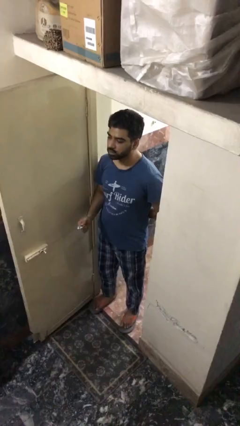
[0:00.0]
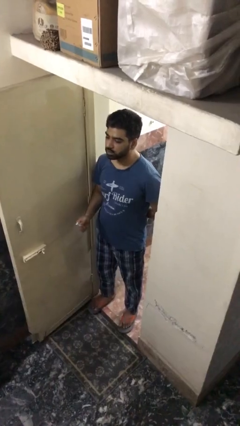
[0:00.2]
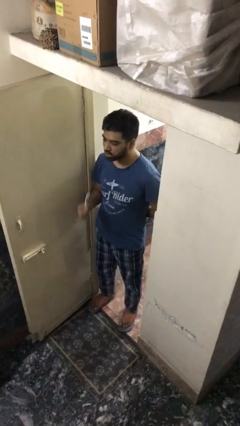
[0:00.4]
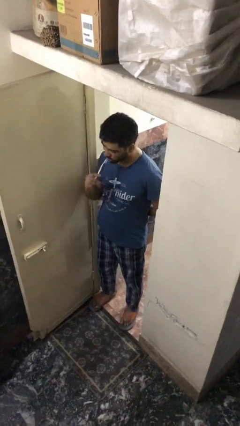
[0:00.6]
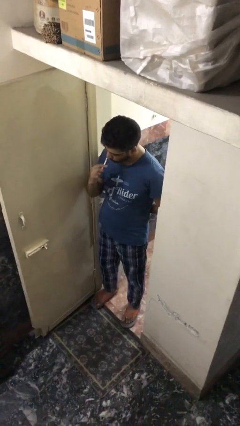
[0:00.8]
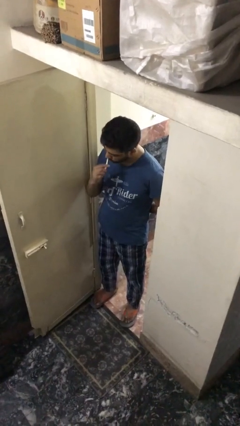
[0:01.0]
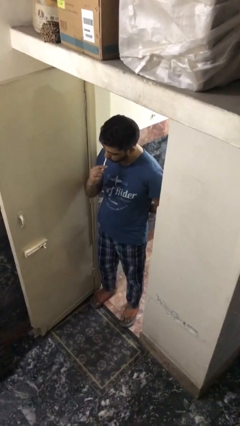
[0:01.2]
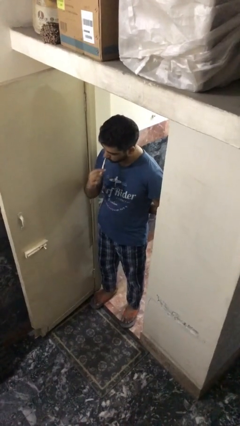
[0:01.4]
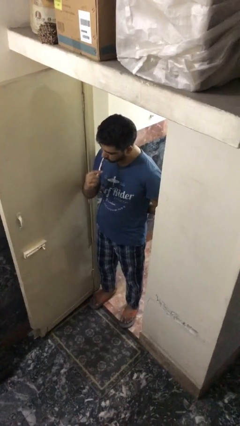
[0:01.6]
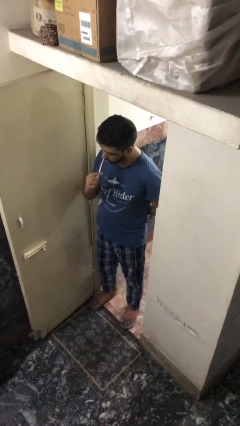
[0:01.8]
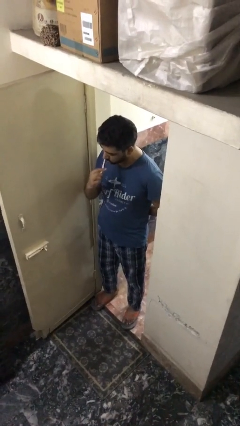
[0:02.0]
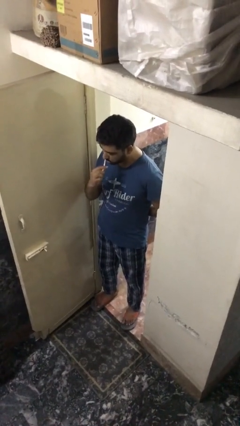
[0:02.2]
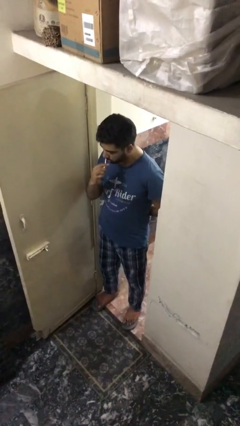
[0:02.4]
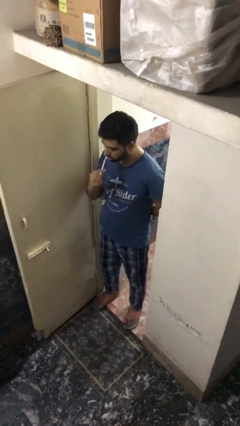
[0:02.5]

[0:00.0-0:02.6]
person brushes teeth

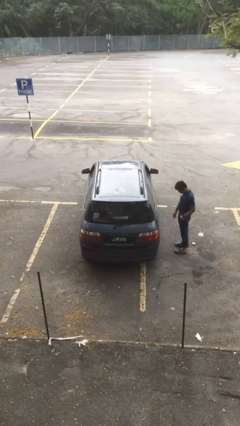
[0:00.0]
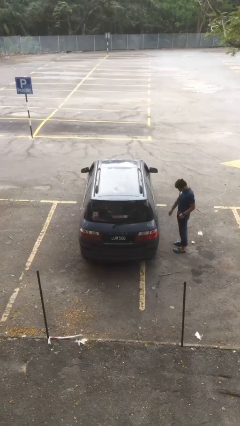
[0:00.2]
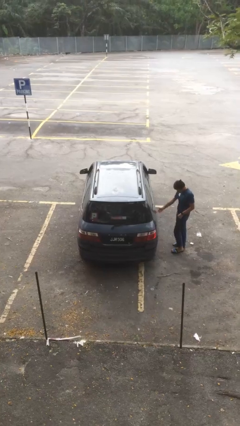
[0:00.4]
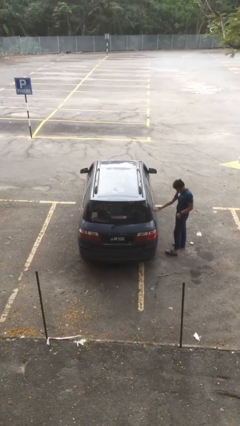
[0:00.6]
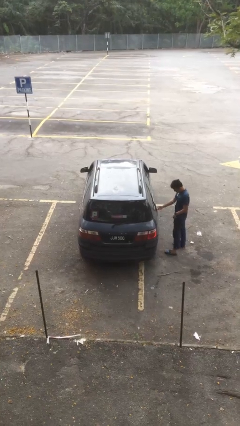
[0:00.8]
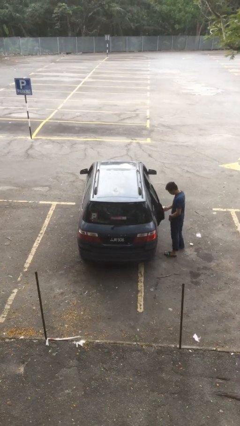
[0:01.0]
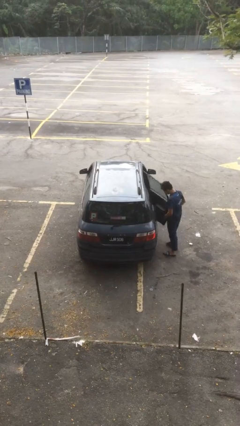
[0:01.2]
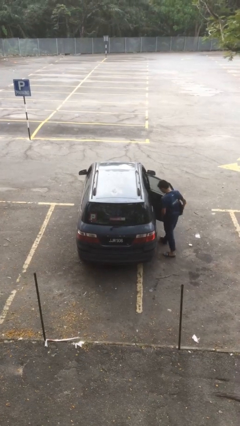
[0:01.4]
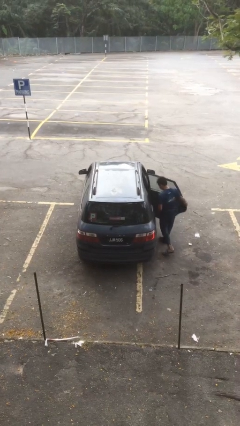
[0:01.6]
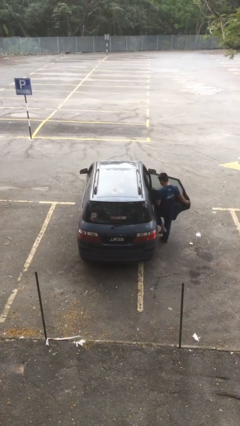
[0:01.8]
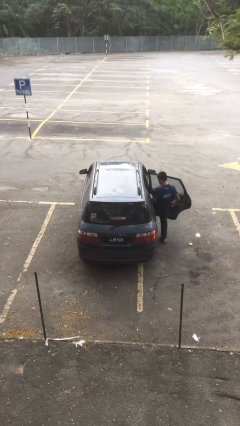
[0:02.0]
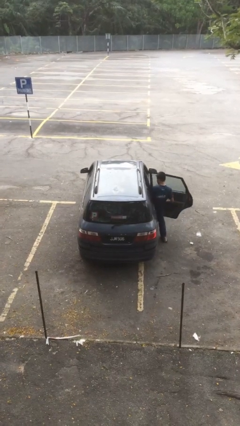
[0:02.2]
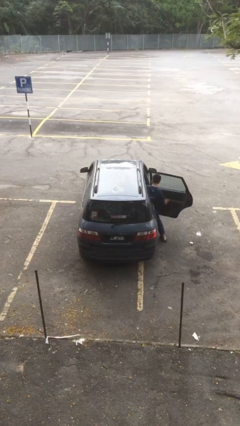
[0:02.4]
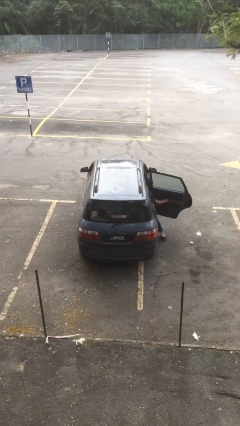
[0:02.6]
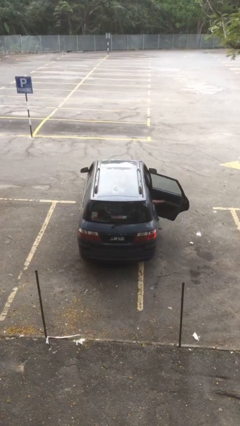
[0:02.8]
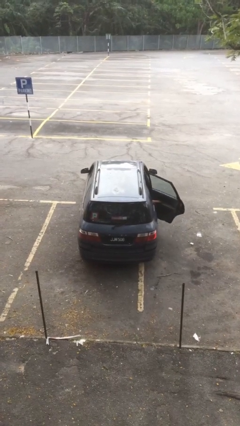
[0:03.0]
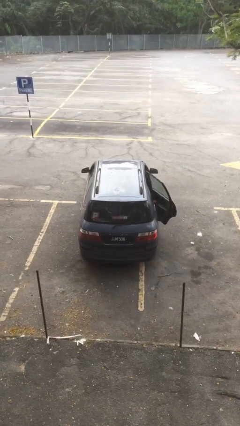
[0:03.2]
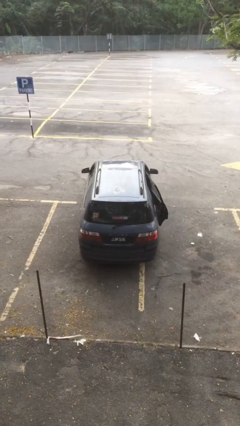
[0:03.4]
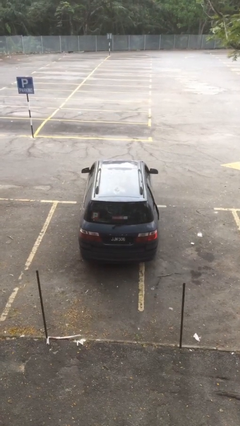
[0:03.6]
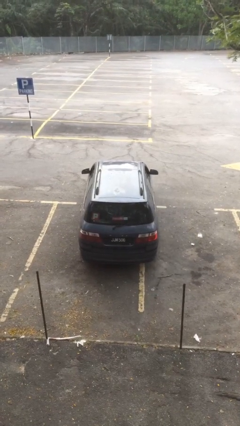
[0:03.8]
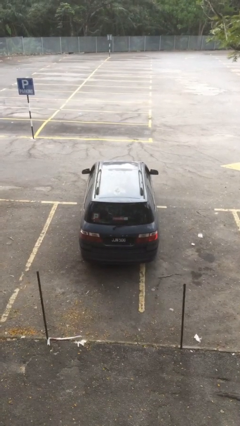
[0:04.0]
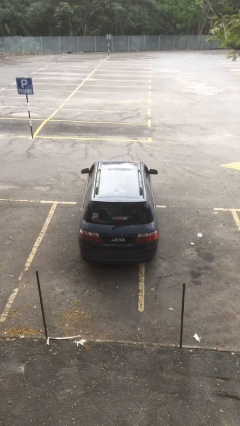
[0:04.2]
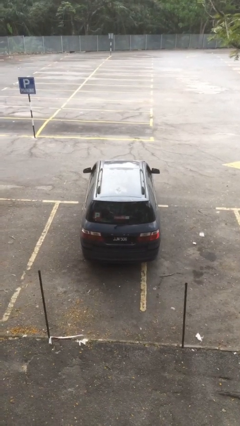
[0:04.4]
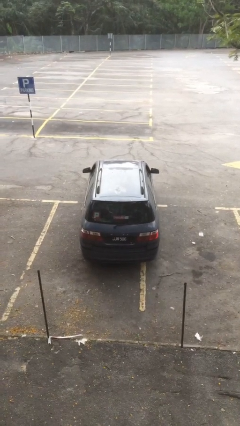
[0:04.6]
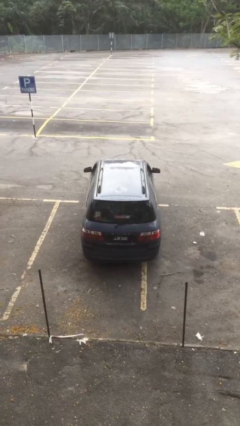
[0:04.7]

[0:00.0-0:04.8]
car picks up person

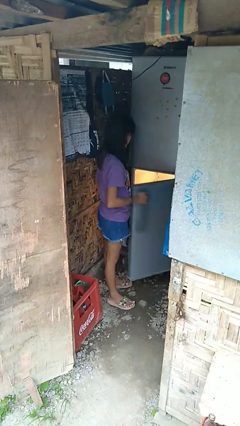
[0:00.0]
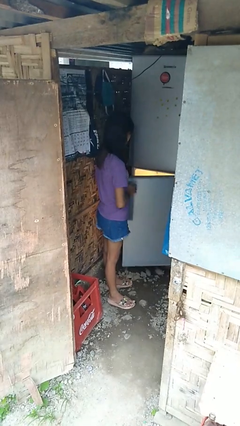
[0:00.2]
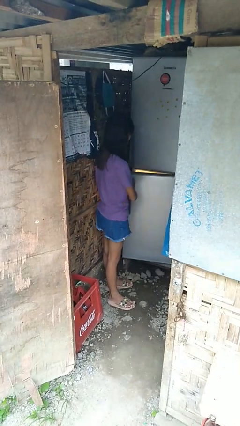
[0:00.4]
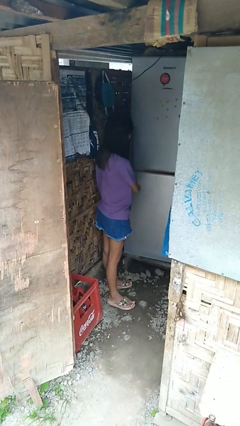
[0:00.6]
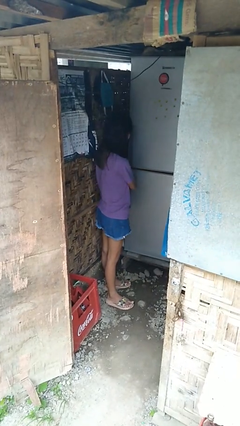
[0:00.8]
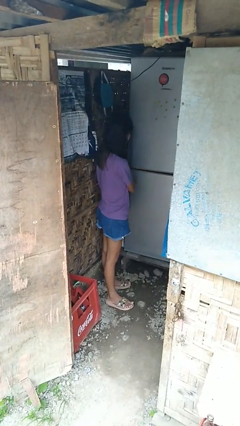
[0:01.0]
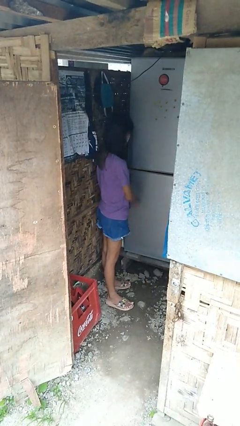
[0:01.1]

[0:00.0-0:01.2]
person closes refrigerator

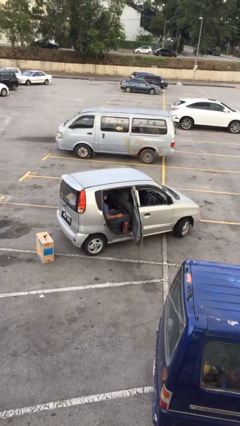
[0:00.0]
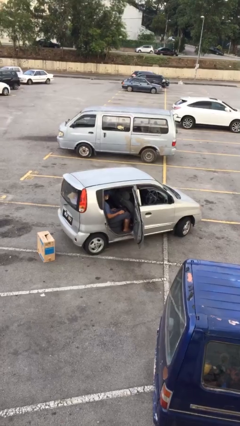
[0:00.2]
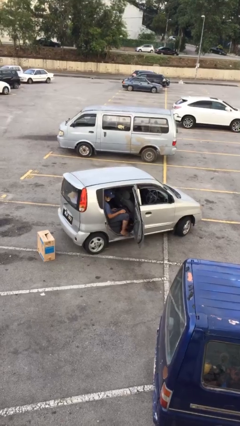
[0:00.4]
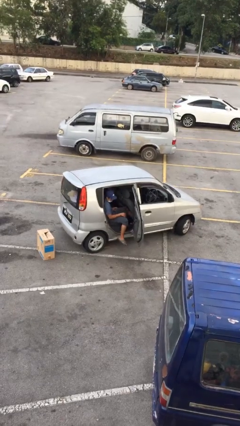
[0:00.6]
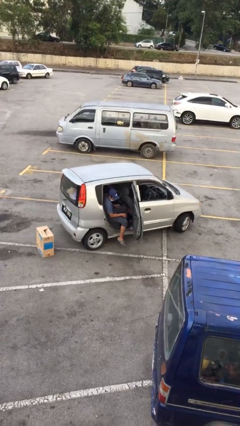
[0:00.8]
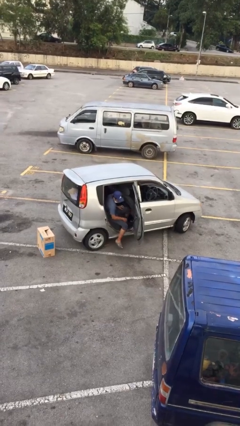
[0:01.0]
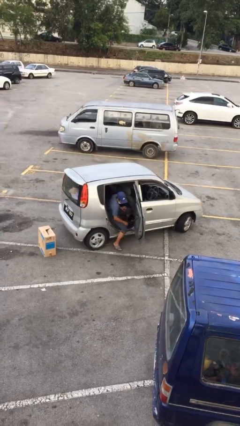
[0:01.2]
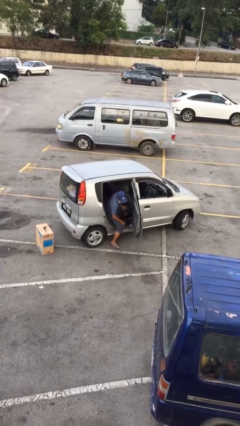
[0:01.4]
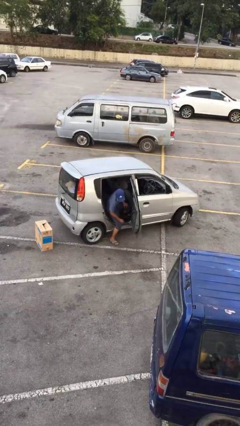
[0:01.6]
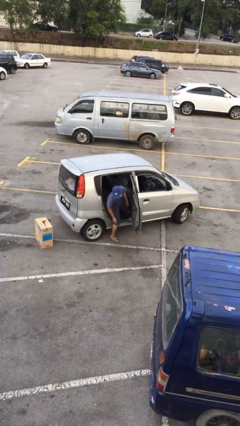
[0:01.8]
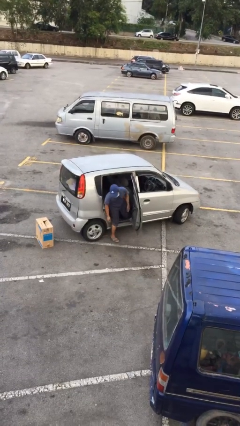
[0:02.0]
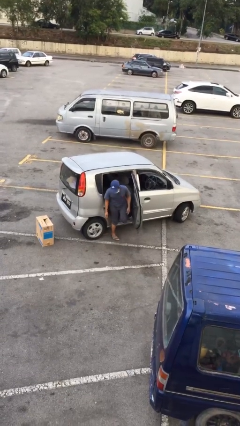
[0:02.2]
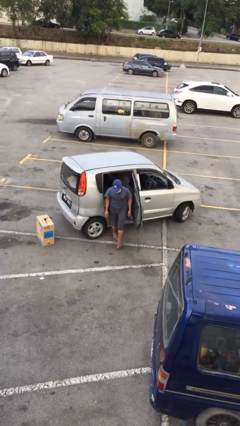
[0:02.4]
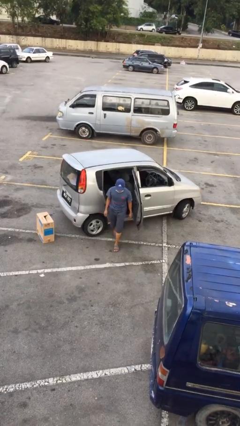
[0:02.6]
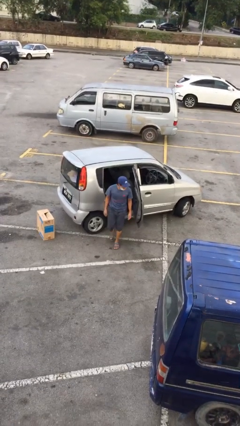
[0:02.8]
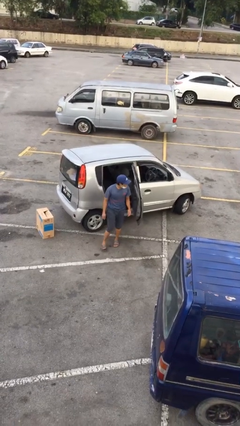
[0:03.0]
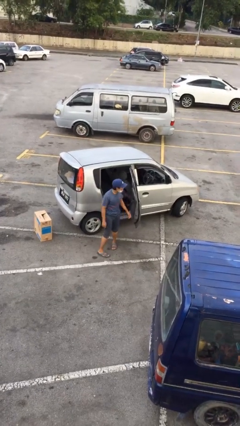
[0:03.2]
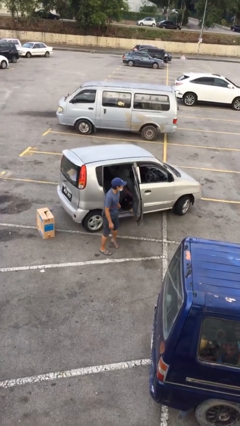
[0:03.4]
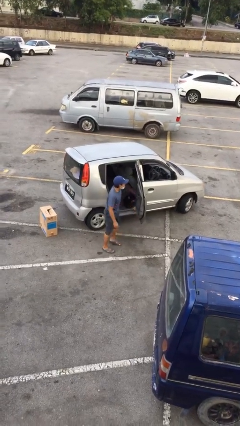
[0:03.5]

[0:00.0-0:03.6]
person exits car

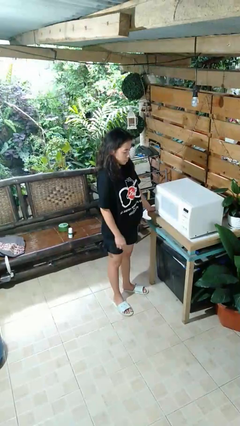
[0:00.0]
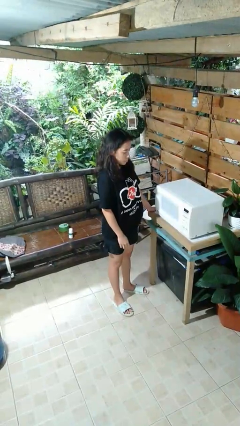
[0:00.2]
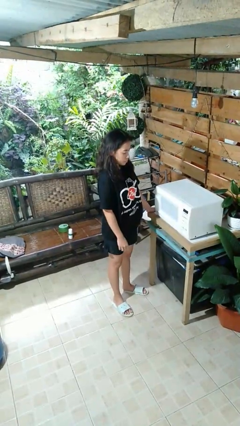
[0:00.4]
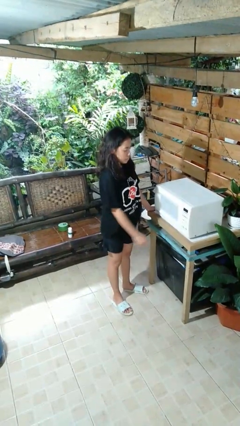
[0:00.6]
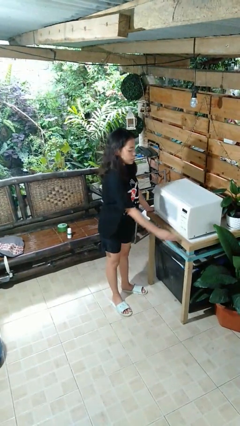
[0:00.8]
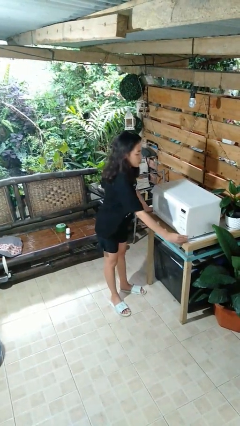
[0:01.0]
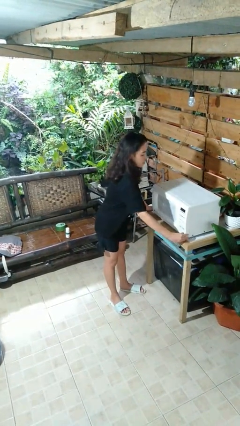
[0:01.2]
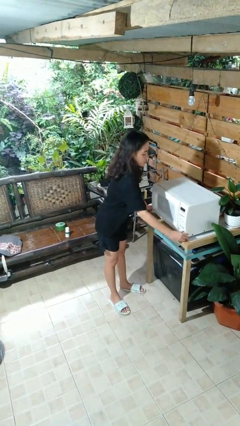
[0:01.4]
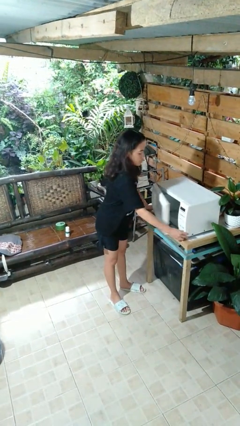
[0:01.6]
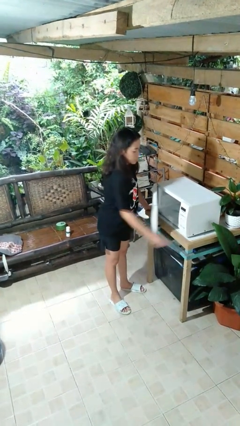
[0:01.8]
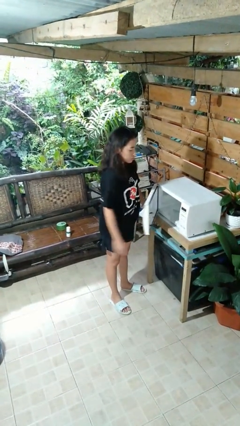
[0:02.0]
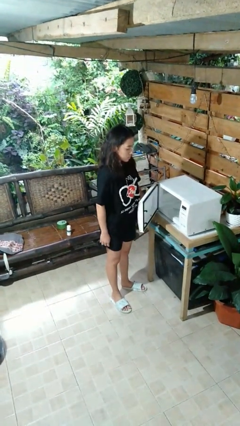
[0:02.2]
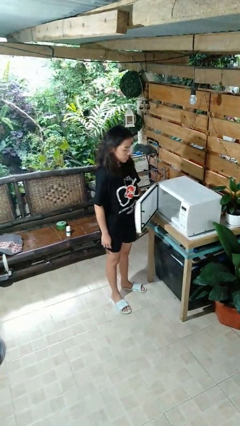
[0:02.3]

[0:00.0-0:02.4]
person opens microwave

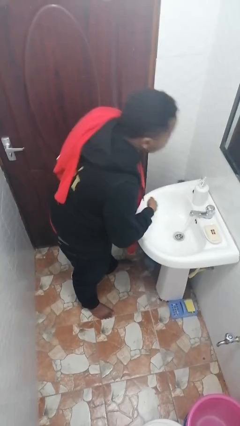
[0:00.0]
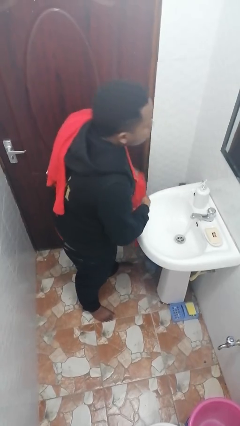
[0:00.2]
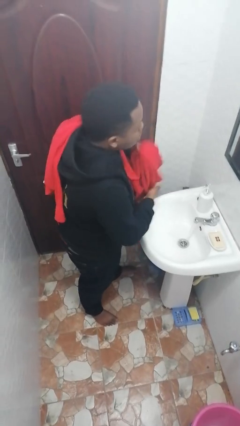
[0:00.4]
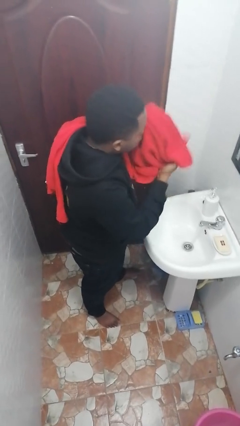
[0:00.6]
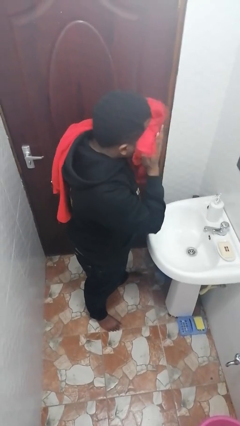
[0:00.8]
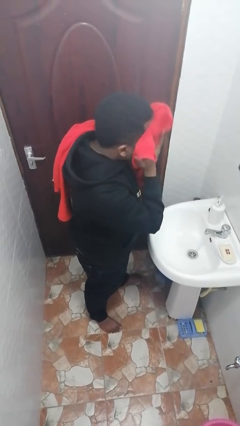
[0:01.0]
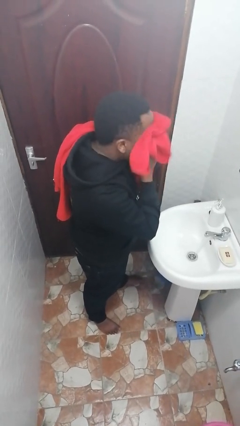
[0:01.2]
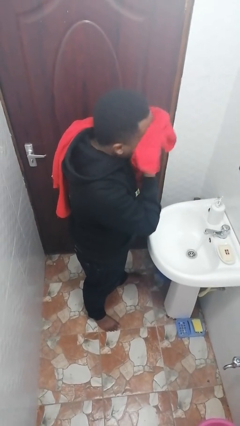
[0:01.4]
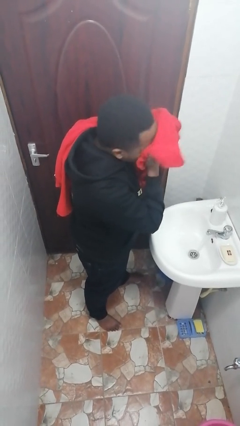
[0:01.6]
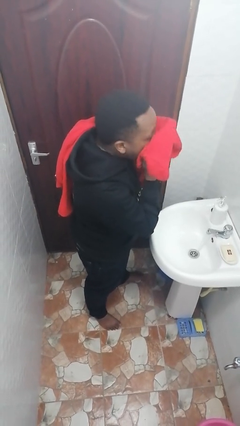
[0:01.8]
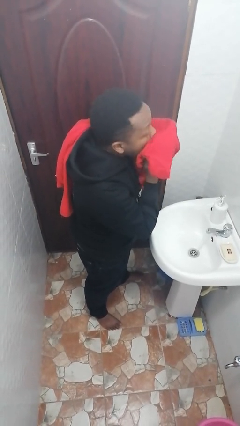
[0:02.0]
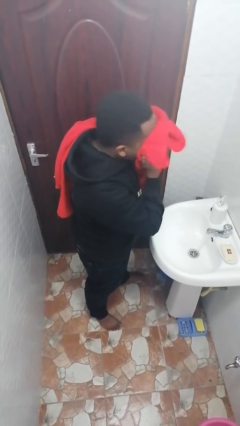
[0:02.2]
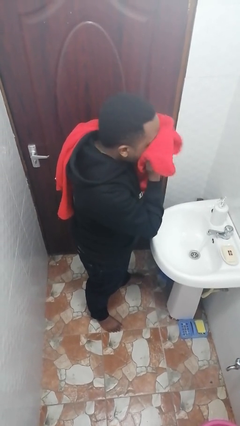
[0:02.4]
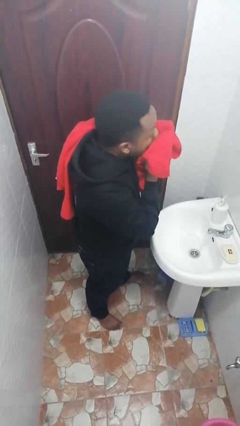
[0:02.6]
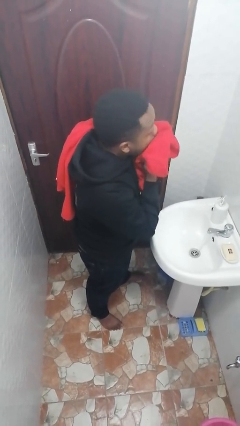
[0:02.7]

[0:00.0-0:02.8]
person dries face with towel

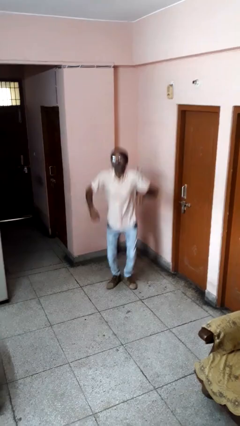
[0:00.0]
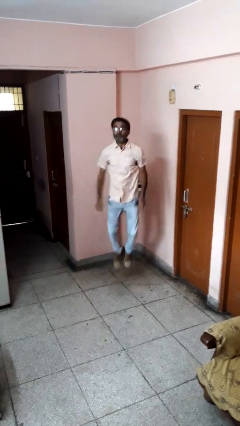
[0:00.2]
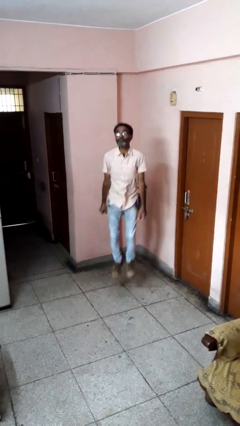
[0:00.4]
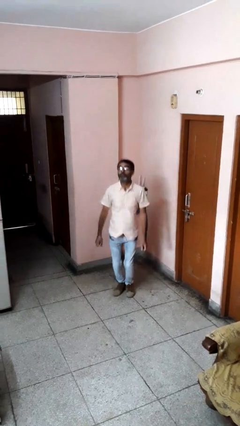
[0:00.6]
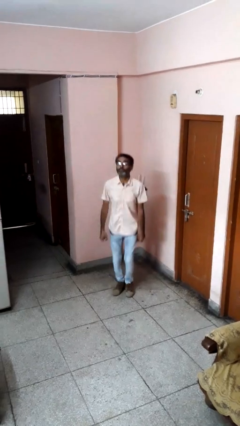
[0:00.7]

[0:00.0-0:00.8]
person jumps
